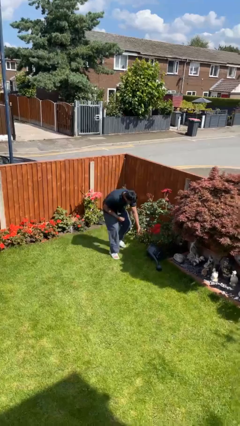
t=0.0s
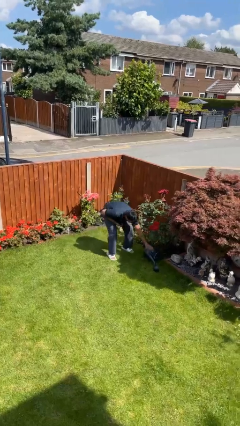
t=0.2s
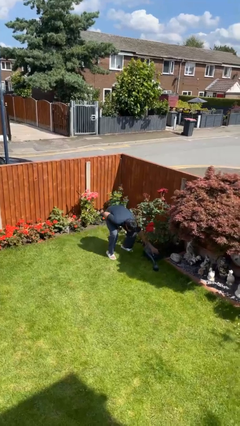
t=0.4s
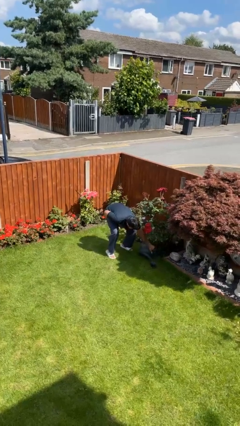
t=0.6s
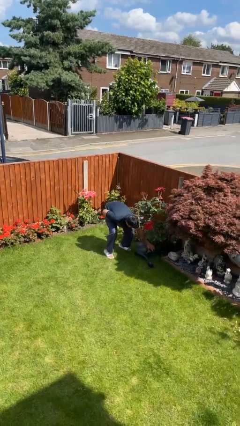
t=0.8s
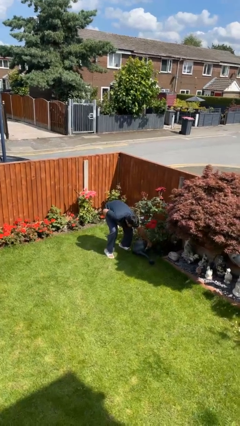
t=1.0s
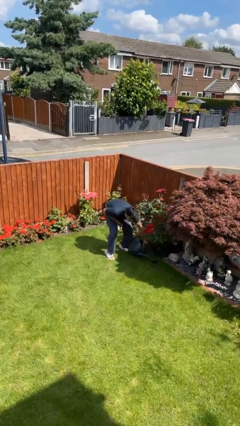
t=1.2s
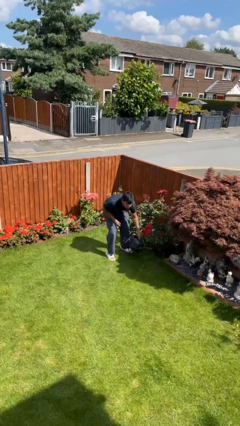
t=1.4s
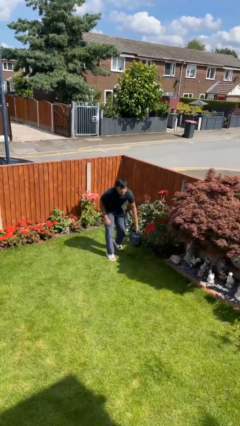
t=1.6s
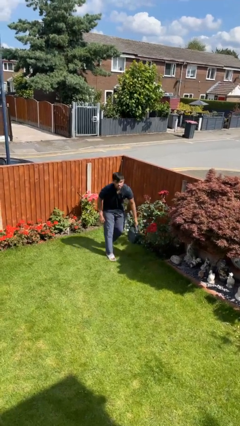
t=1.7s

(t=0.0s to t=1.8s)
person picks up object from floor

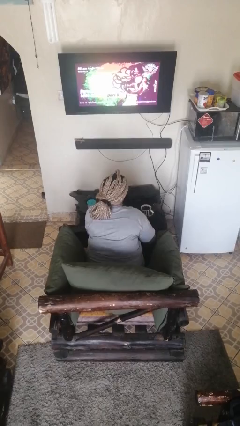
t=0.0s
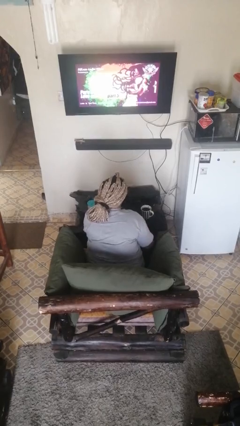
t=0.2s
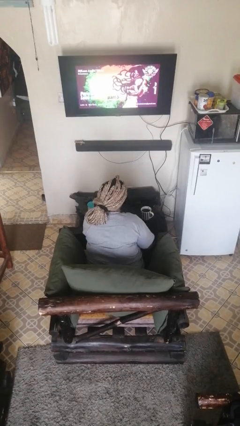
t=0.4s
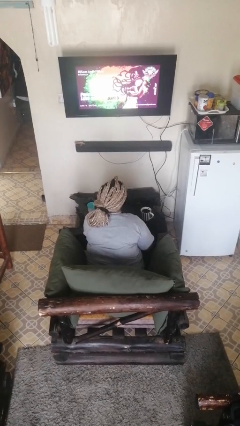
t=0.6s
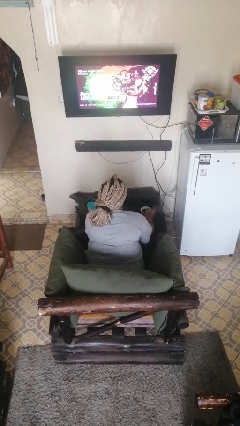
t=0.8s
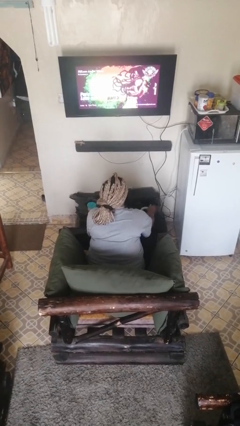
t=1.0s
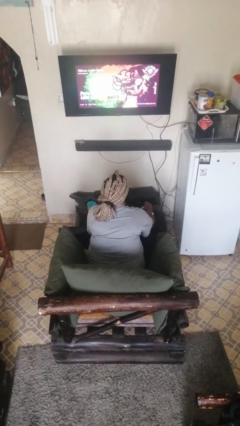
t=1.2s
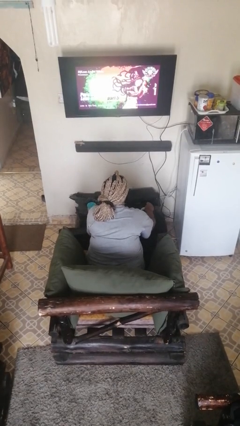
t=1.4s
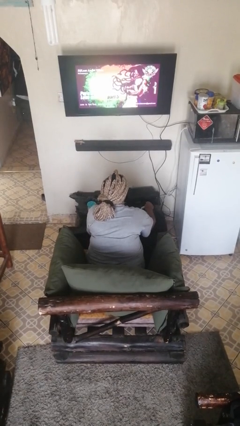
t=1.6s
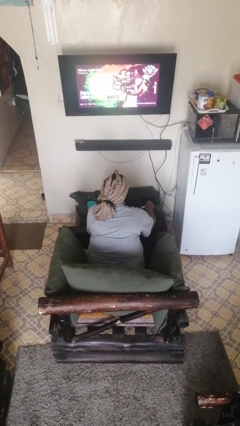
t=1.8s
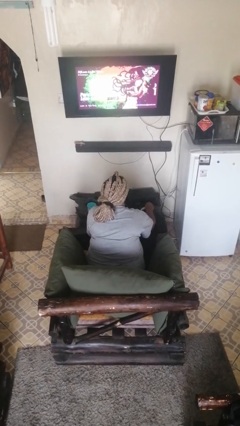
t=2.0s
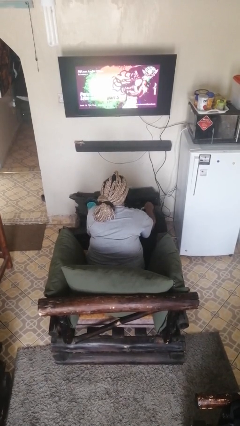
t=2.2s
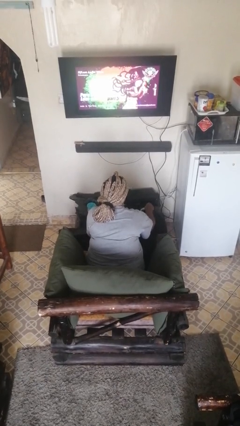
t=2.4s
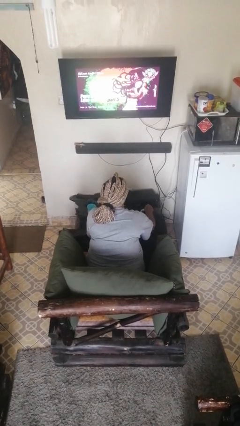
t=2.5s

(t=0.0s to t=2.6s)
person stirs mug

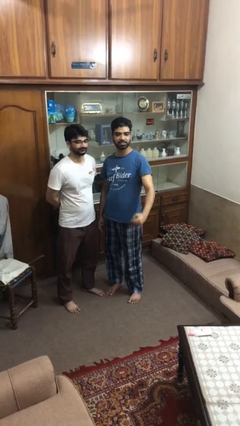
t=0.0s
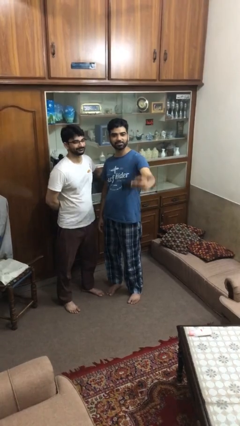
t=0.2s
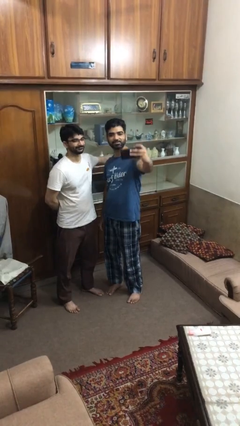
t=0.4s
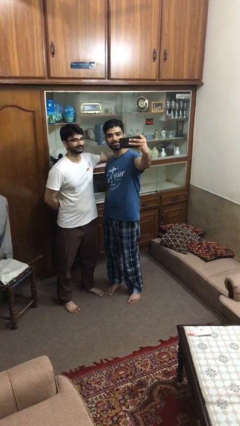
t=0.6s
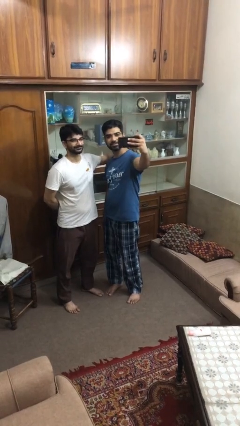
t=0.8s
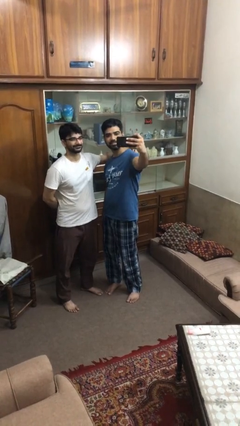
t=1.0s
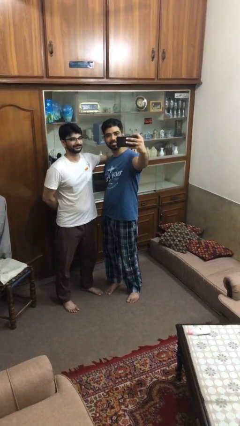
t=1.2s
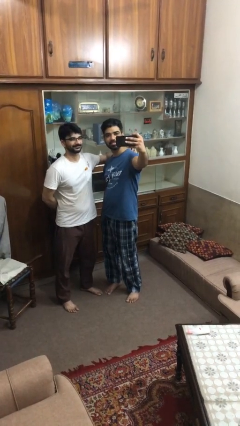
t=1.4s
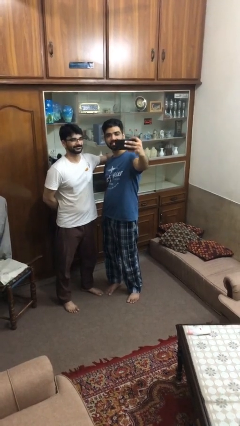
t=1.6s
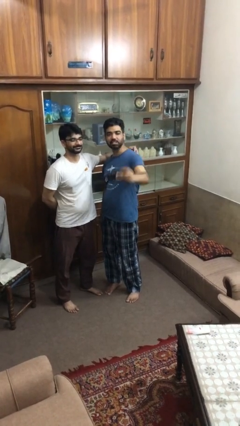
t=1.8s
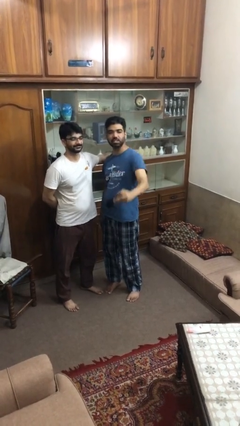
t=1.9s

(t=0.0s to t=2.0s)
person takes selfie with person

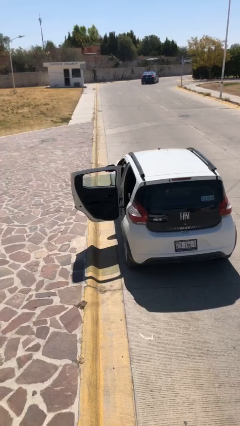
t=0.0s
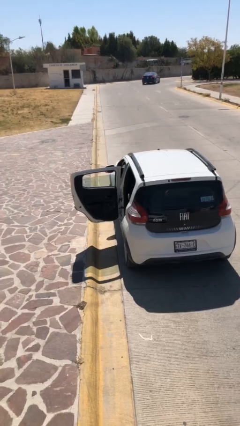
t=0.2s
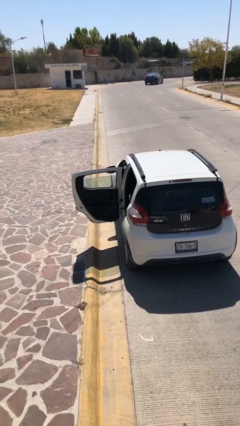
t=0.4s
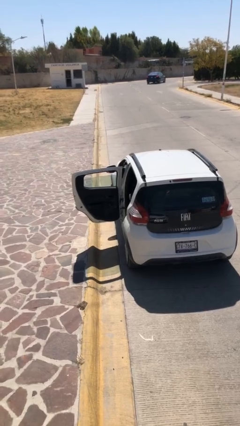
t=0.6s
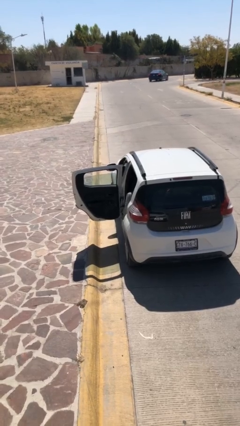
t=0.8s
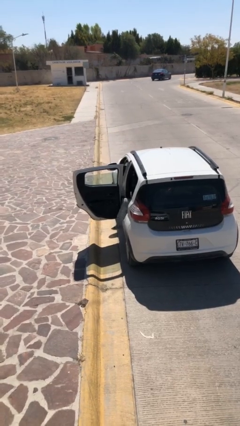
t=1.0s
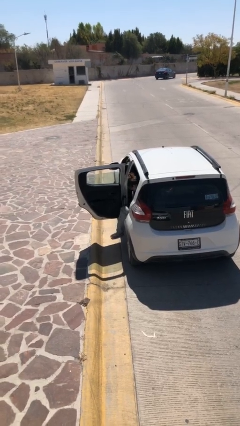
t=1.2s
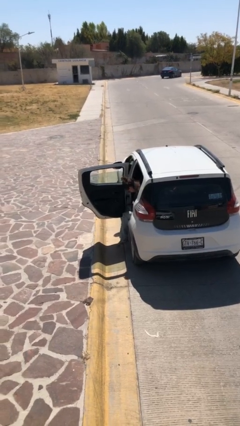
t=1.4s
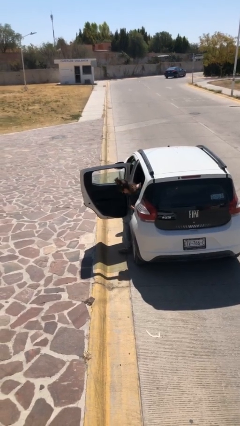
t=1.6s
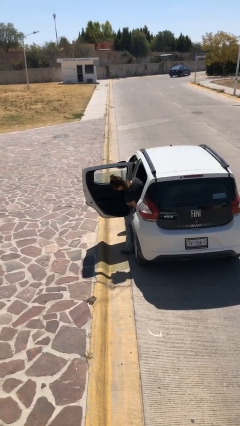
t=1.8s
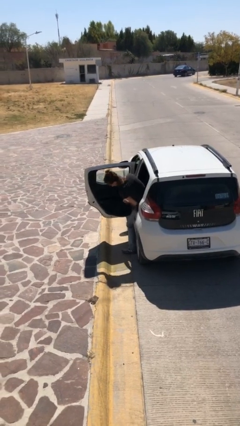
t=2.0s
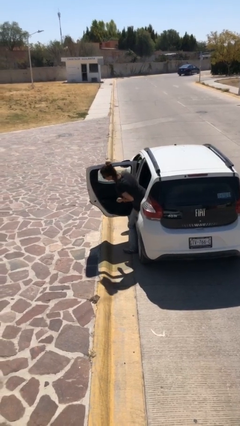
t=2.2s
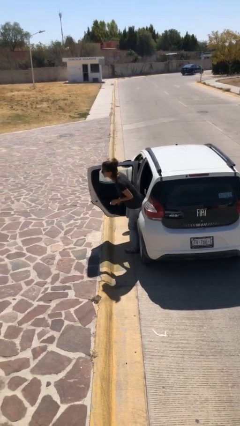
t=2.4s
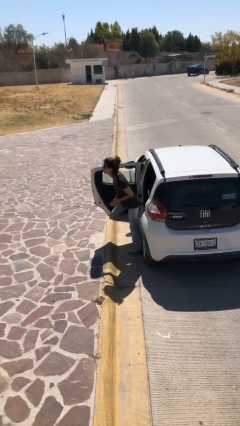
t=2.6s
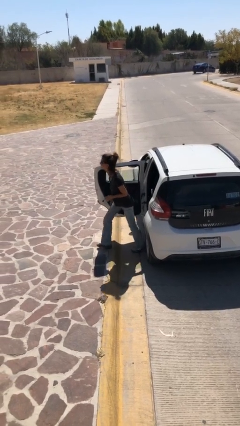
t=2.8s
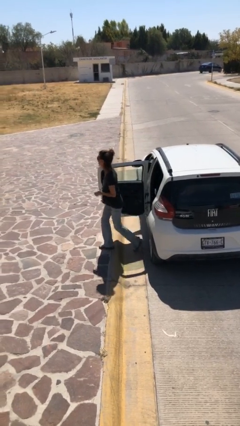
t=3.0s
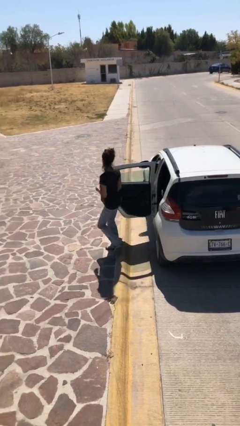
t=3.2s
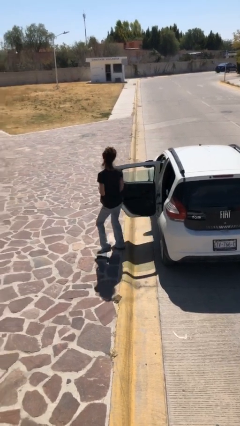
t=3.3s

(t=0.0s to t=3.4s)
person exits car

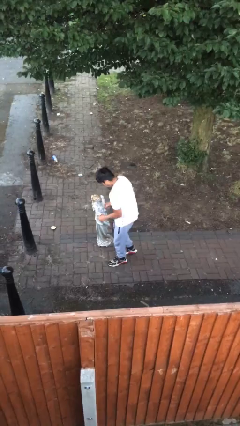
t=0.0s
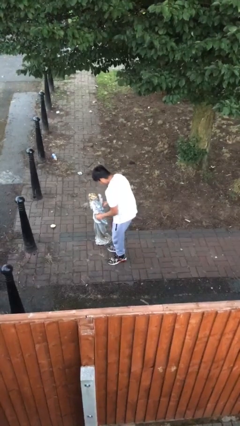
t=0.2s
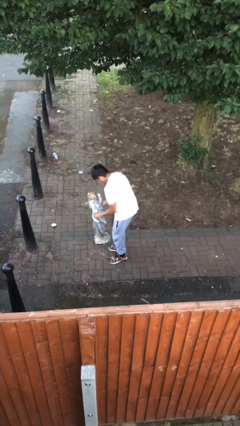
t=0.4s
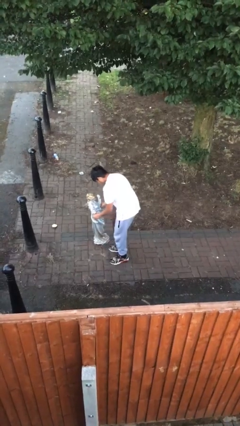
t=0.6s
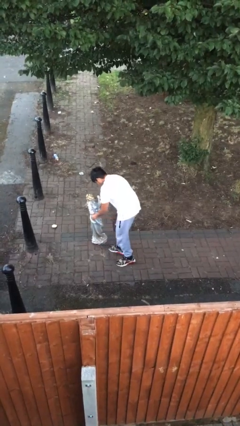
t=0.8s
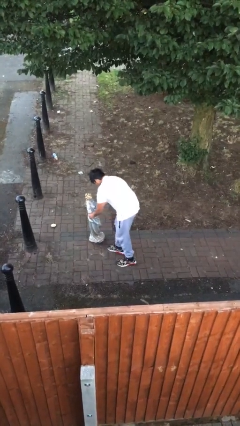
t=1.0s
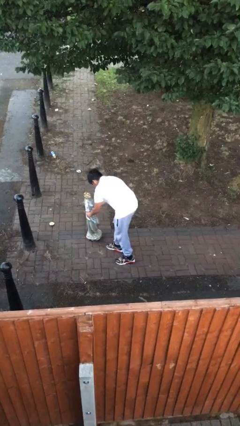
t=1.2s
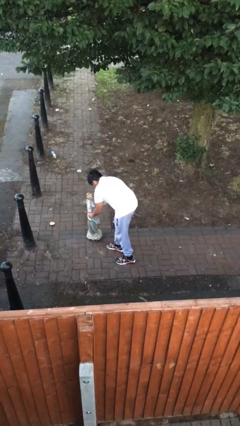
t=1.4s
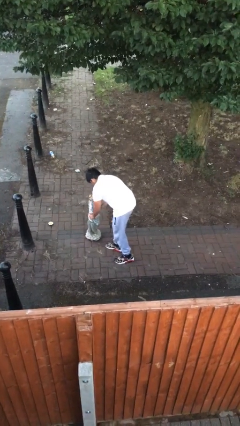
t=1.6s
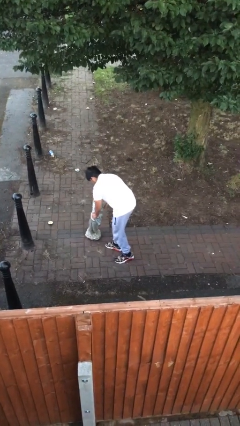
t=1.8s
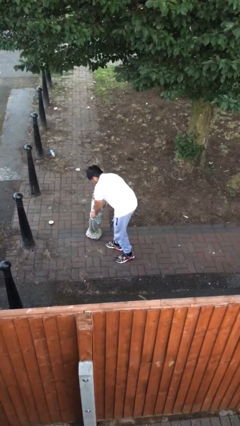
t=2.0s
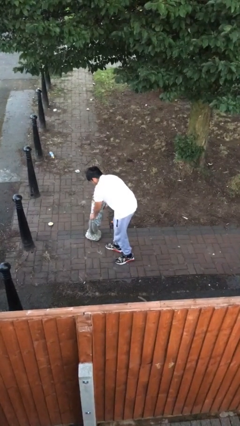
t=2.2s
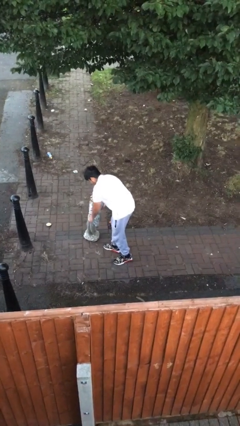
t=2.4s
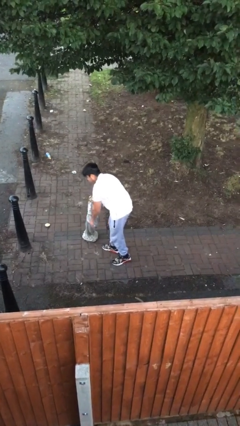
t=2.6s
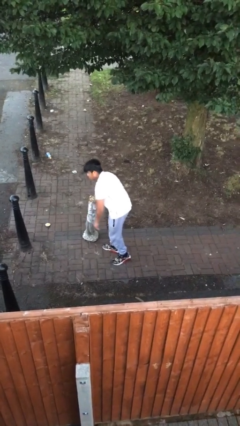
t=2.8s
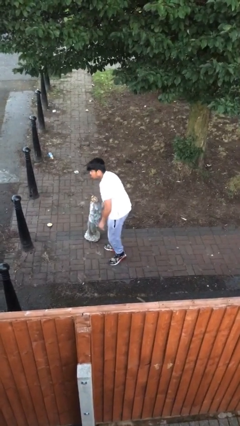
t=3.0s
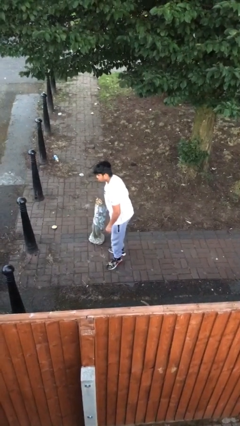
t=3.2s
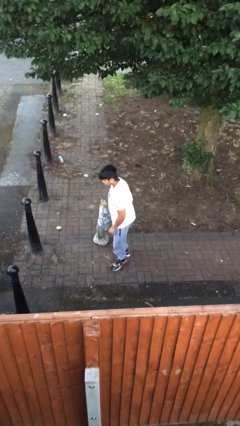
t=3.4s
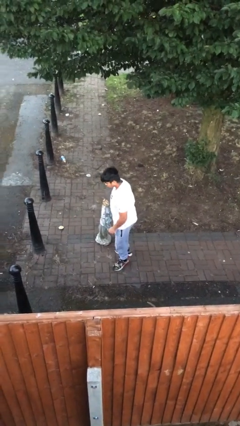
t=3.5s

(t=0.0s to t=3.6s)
person puts down object on floor

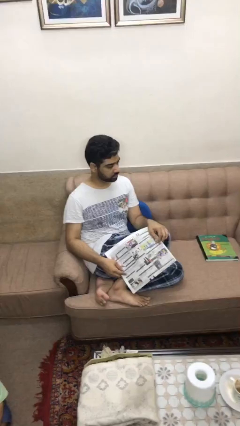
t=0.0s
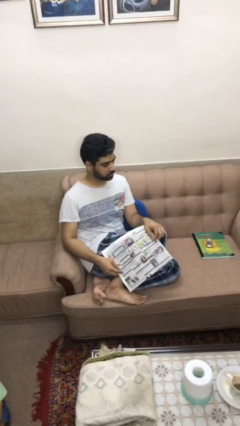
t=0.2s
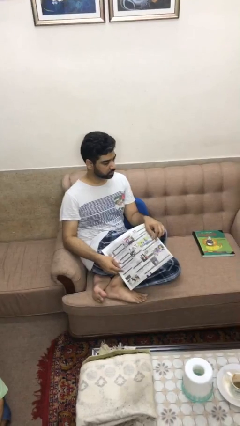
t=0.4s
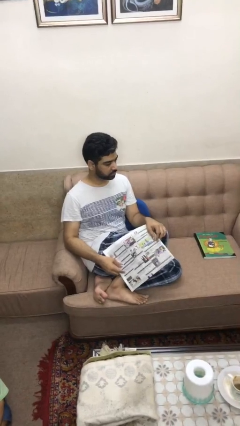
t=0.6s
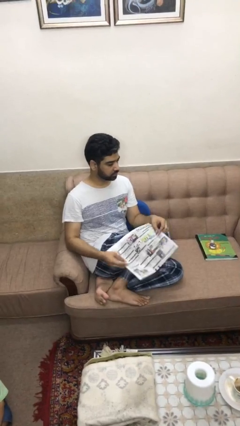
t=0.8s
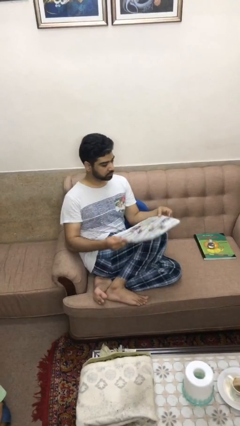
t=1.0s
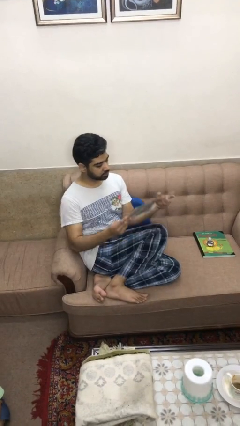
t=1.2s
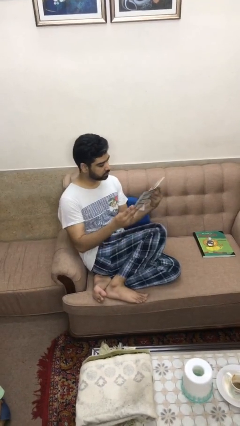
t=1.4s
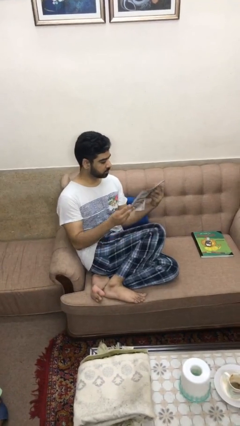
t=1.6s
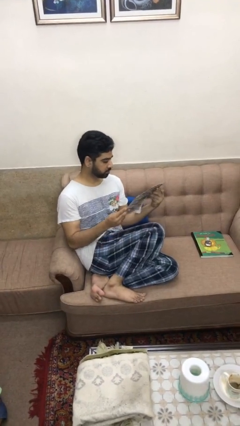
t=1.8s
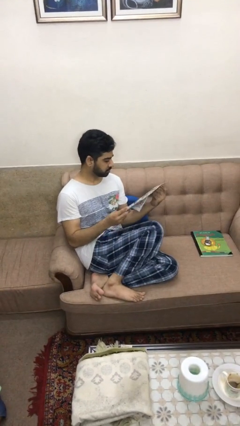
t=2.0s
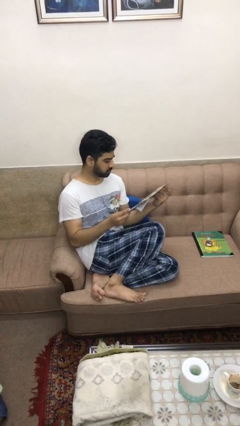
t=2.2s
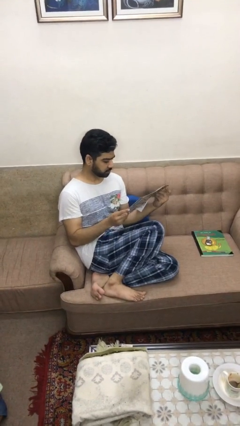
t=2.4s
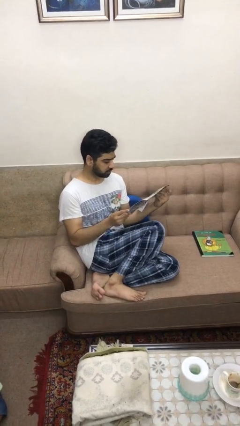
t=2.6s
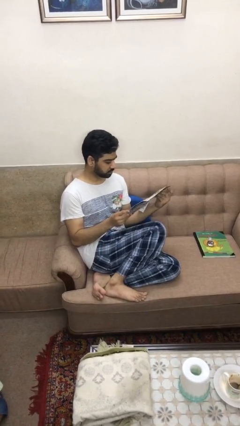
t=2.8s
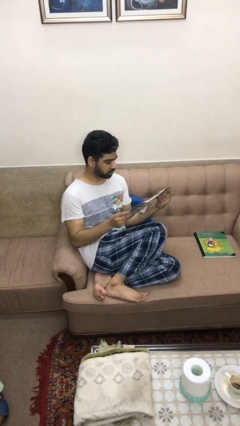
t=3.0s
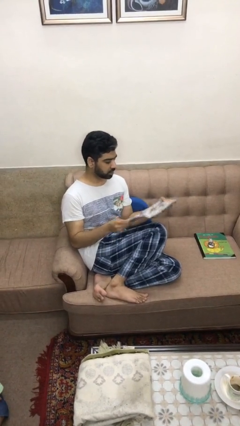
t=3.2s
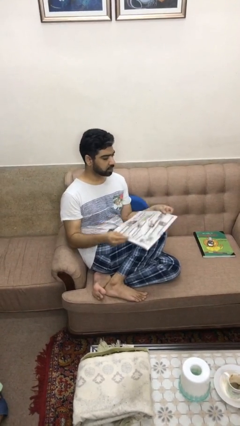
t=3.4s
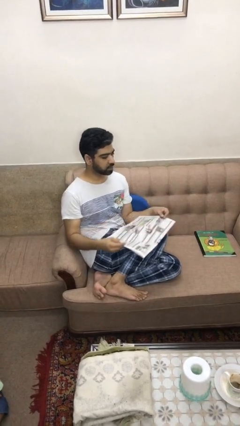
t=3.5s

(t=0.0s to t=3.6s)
person reads newspaper

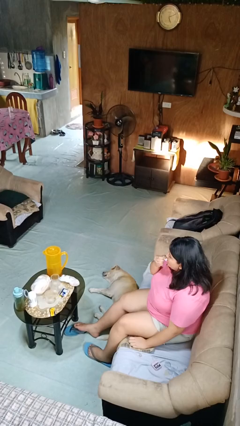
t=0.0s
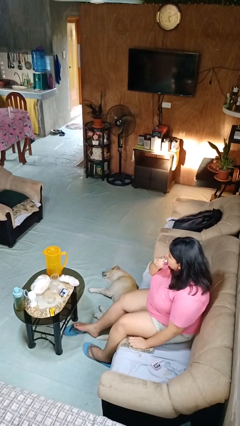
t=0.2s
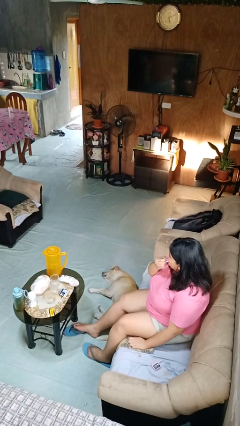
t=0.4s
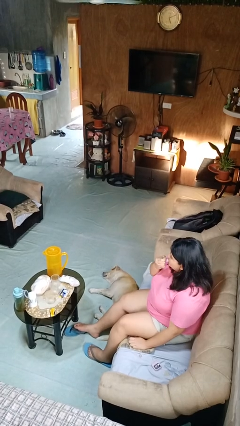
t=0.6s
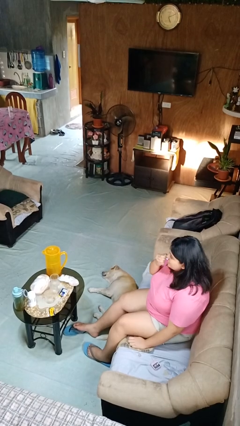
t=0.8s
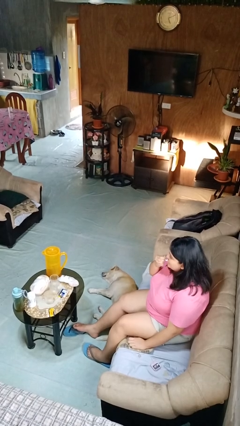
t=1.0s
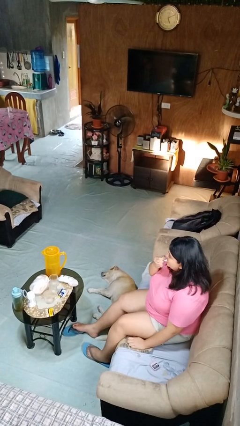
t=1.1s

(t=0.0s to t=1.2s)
person applies lip makeup
